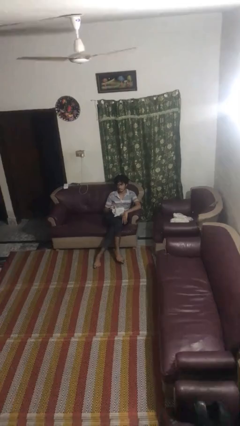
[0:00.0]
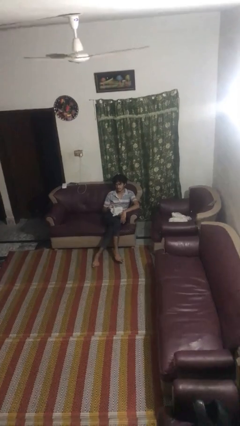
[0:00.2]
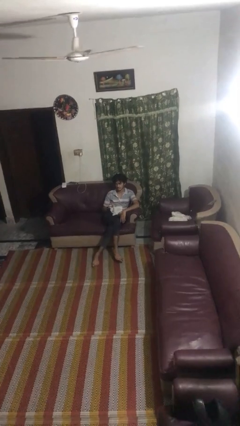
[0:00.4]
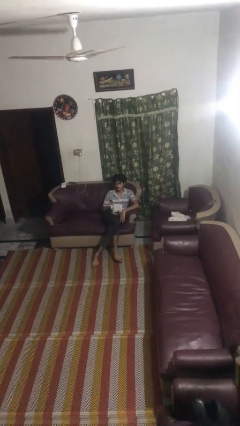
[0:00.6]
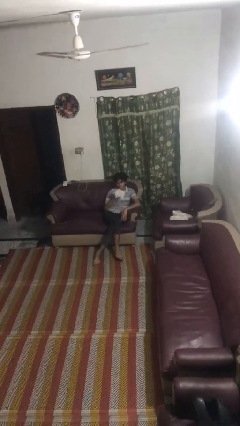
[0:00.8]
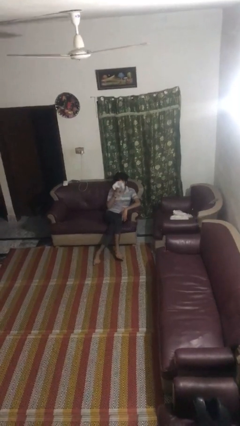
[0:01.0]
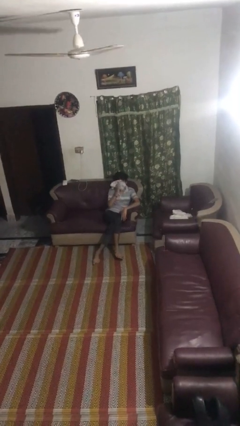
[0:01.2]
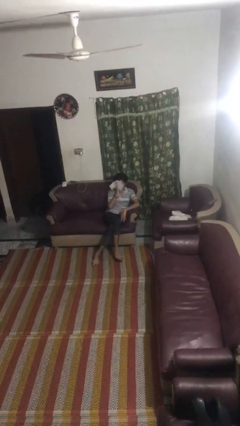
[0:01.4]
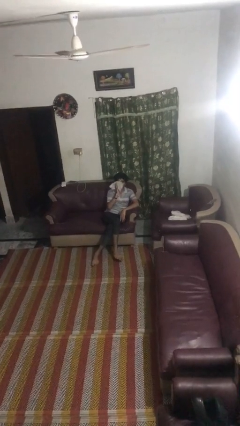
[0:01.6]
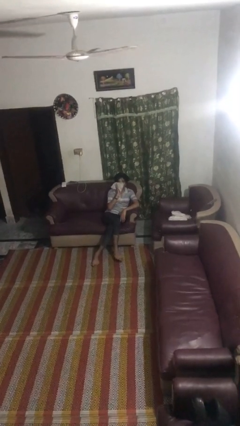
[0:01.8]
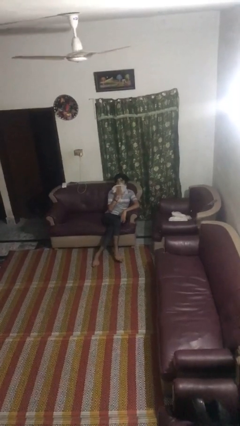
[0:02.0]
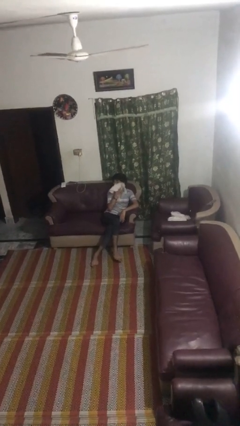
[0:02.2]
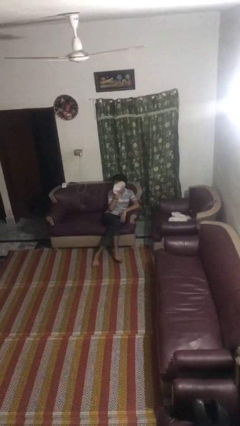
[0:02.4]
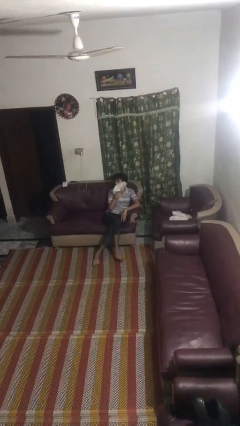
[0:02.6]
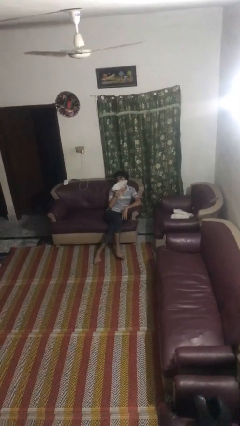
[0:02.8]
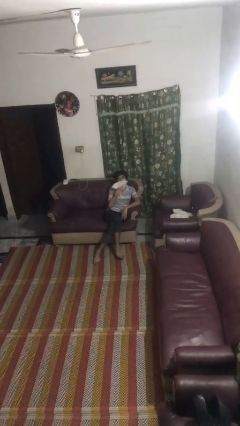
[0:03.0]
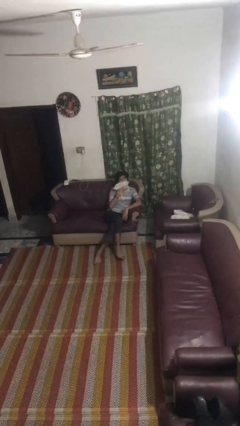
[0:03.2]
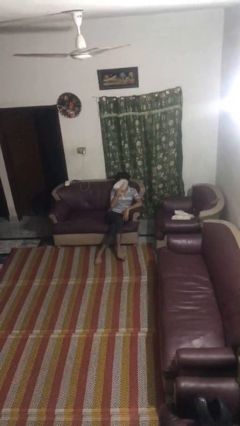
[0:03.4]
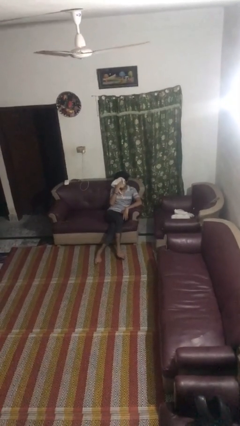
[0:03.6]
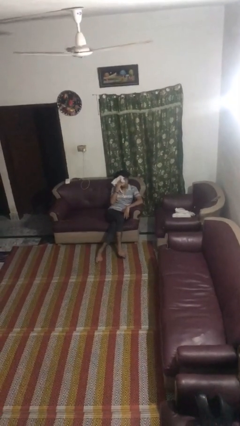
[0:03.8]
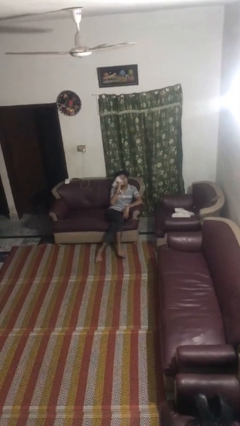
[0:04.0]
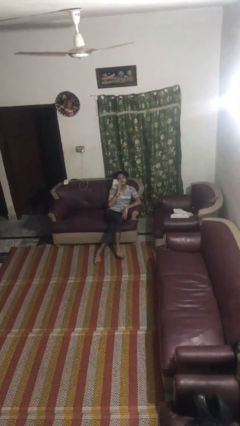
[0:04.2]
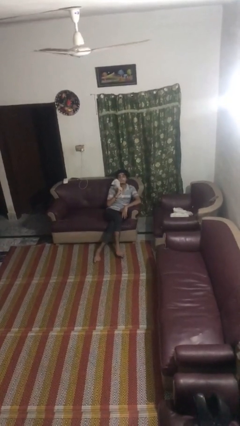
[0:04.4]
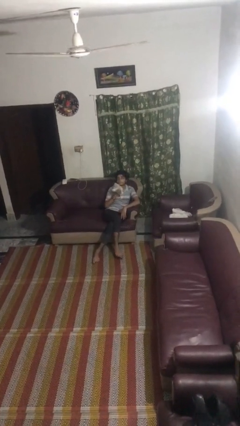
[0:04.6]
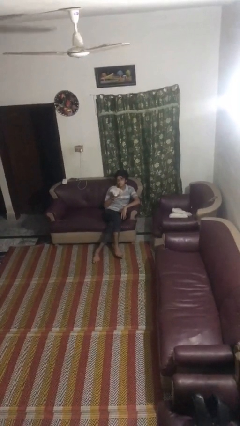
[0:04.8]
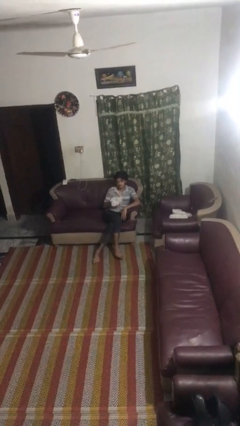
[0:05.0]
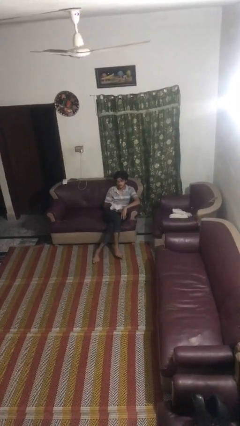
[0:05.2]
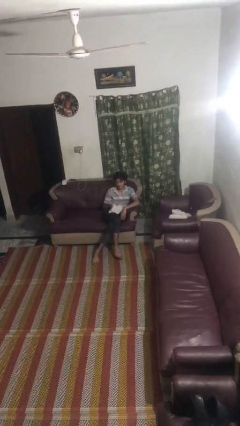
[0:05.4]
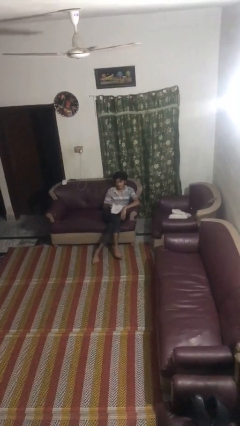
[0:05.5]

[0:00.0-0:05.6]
person wipes mouth with napkin

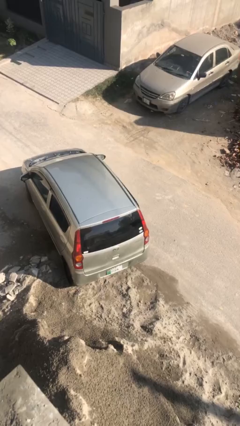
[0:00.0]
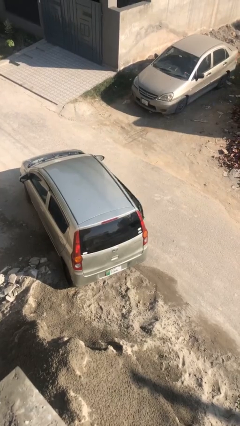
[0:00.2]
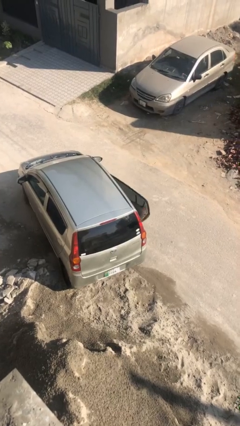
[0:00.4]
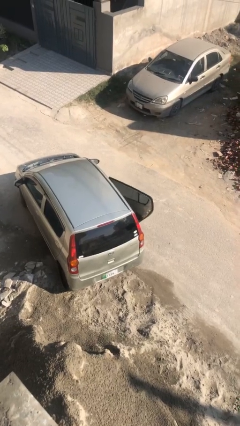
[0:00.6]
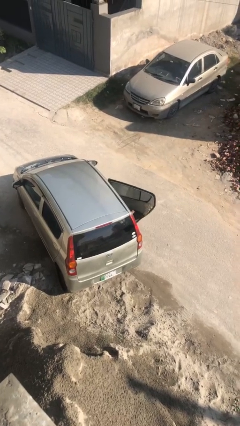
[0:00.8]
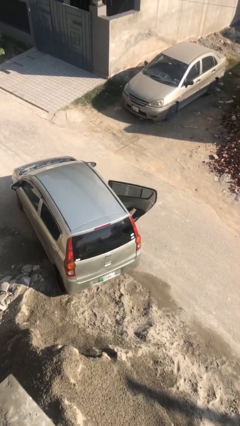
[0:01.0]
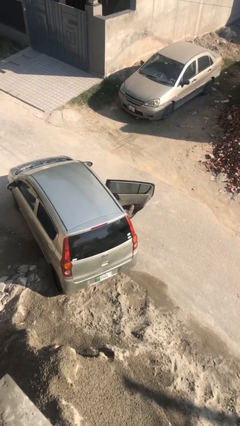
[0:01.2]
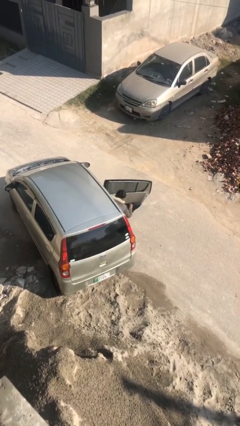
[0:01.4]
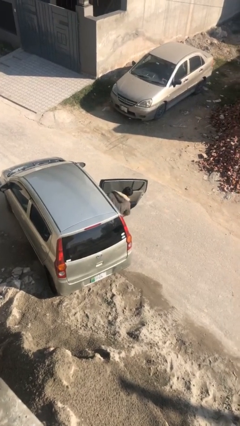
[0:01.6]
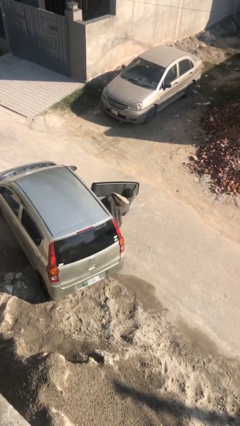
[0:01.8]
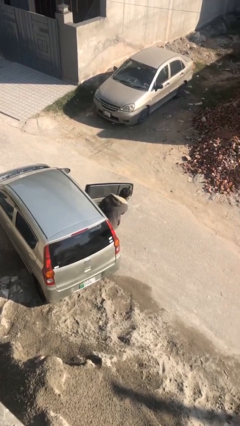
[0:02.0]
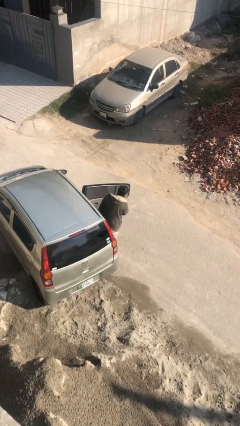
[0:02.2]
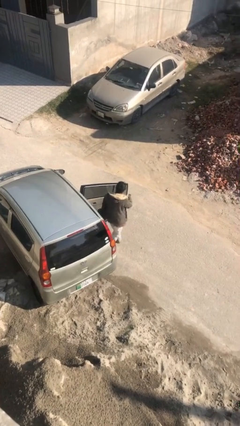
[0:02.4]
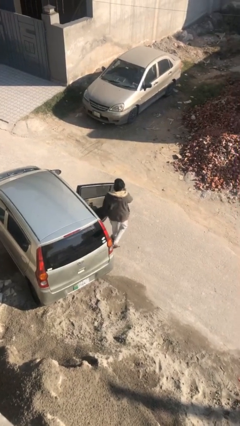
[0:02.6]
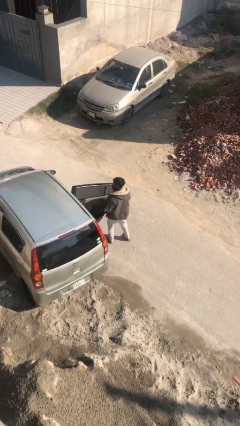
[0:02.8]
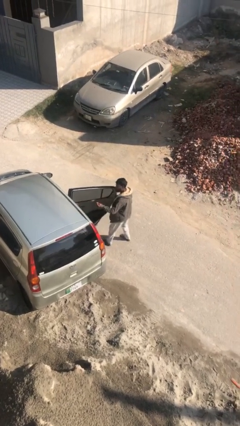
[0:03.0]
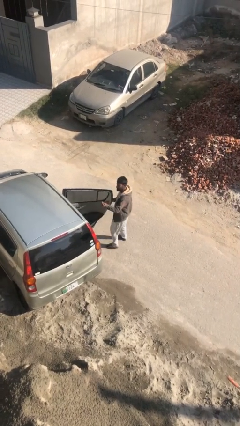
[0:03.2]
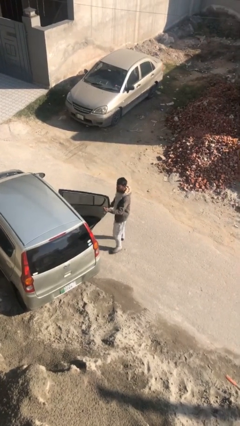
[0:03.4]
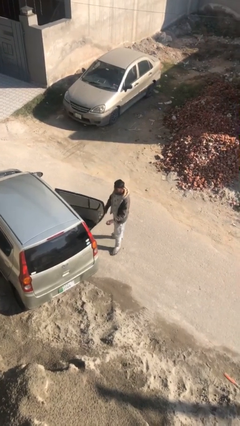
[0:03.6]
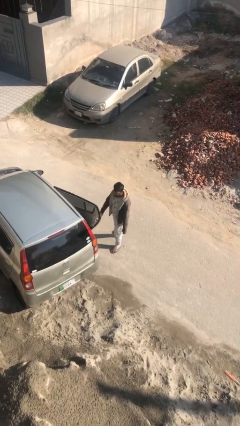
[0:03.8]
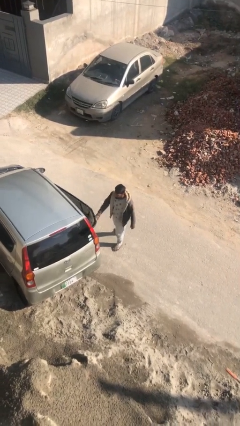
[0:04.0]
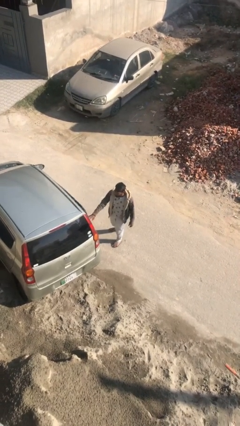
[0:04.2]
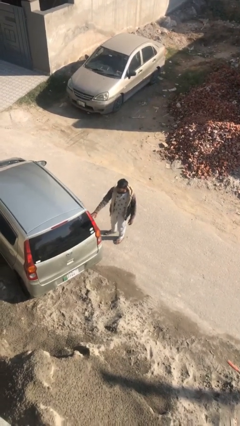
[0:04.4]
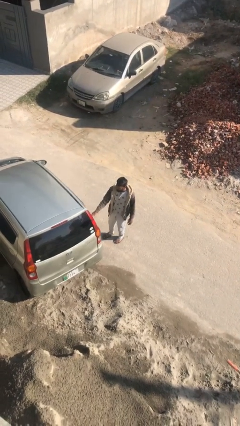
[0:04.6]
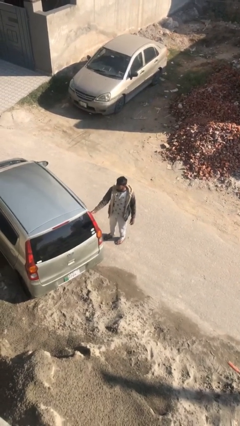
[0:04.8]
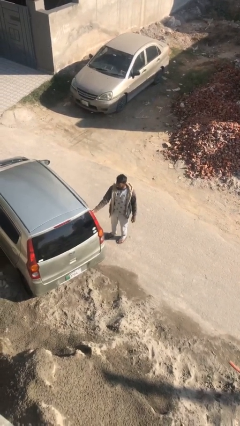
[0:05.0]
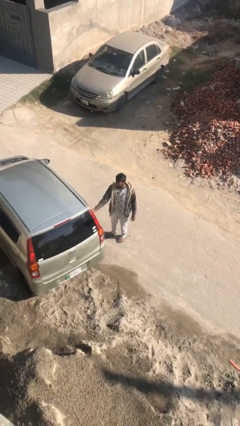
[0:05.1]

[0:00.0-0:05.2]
car drops off person

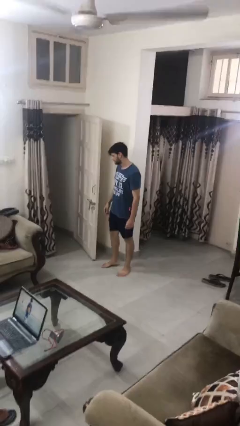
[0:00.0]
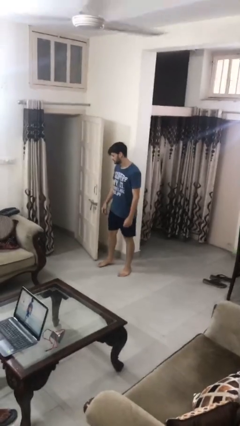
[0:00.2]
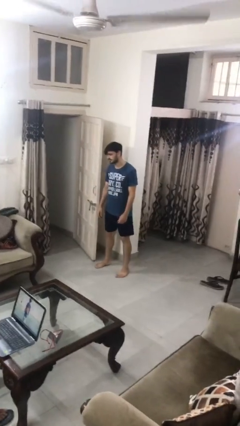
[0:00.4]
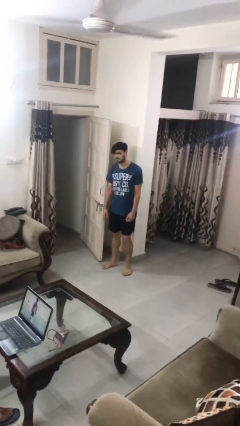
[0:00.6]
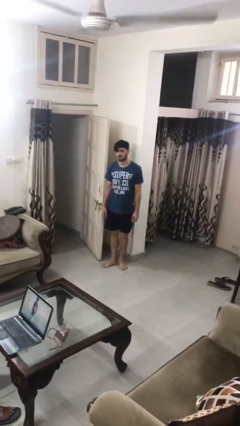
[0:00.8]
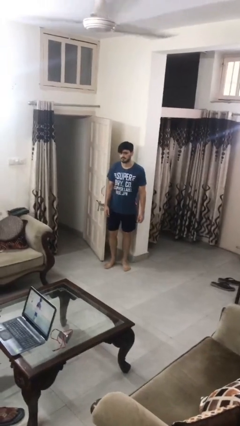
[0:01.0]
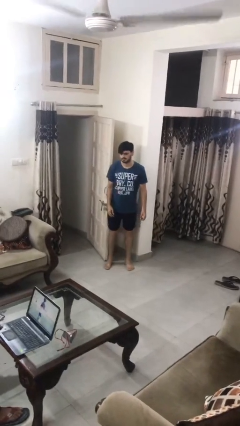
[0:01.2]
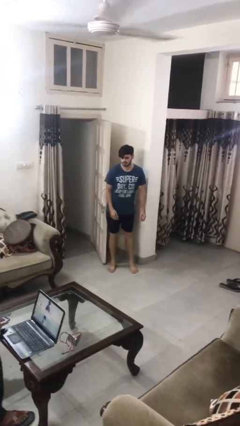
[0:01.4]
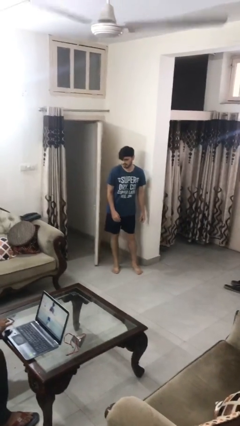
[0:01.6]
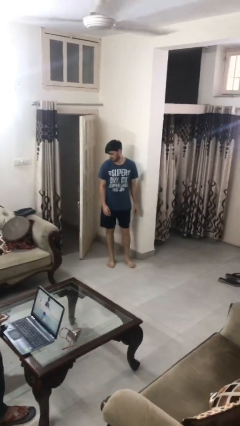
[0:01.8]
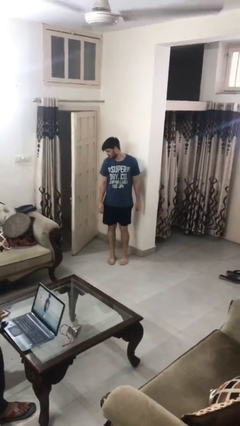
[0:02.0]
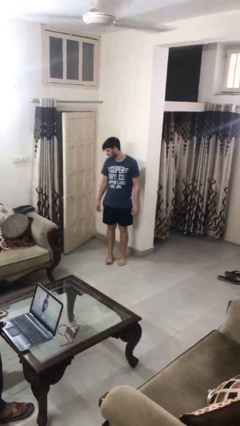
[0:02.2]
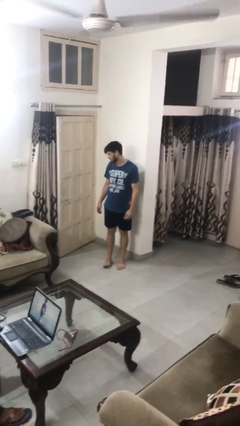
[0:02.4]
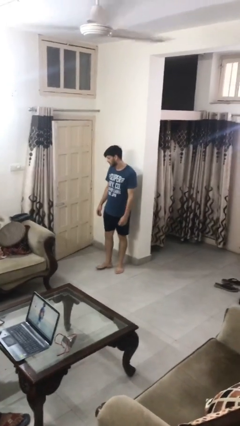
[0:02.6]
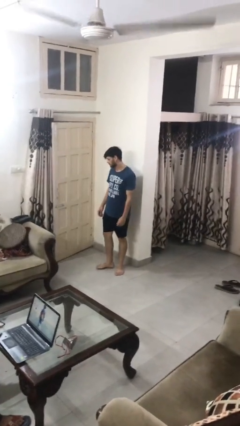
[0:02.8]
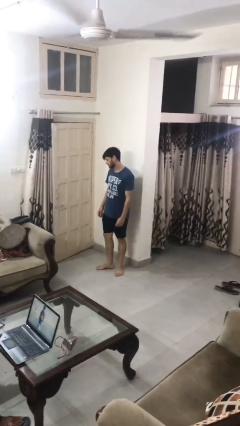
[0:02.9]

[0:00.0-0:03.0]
person closes door with hip

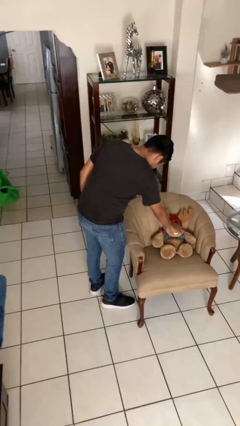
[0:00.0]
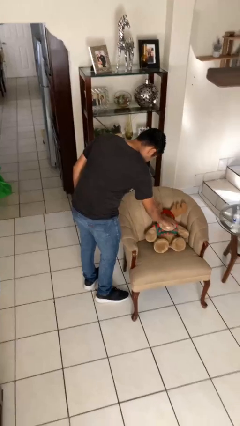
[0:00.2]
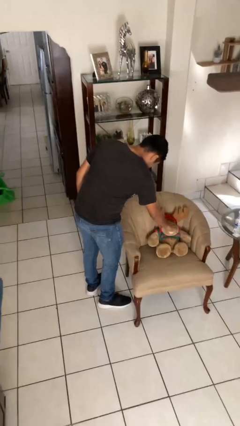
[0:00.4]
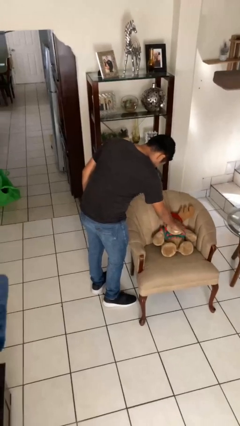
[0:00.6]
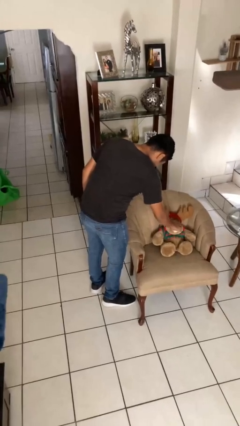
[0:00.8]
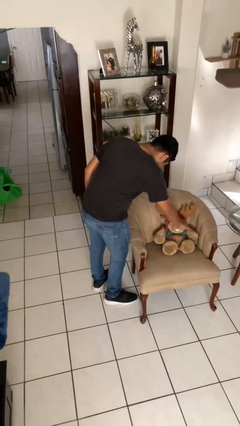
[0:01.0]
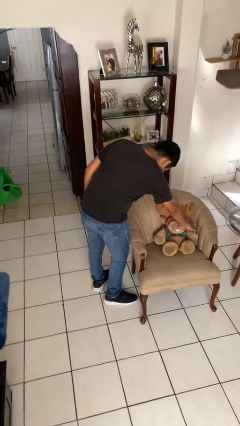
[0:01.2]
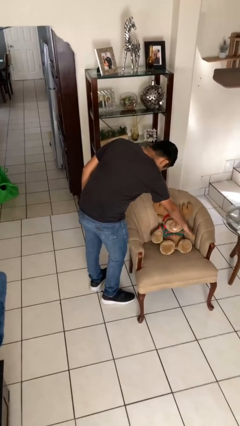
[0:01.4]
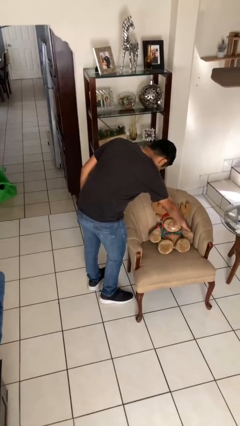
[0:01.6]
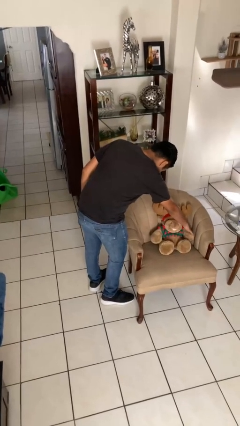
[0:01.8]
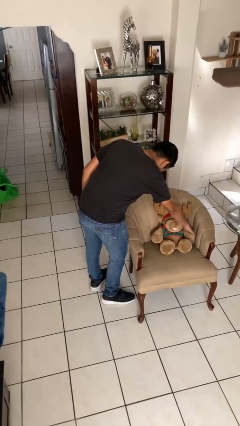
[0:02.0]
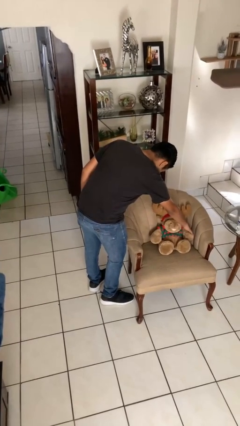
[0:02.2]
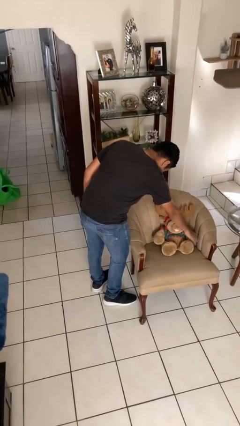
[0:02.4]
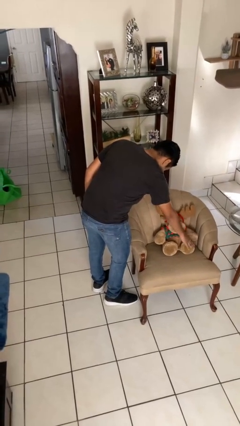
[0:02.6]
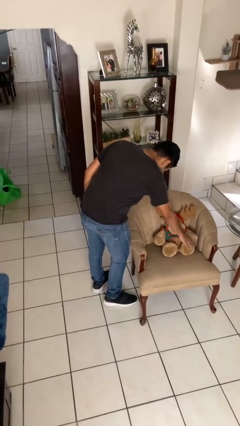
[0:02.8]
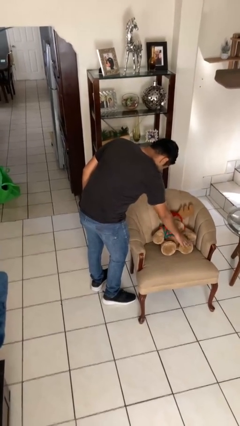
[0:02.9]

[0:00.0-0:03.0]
person waves hand over object

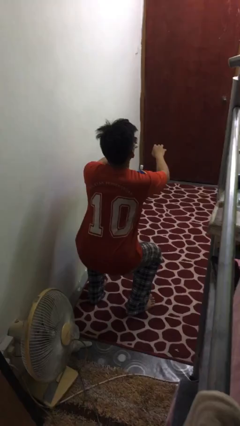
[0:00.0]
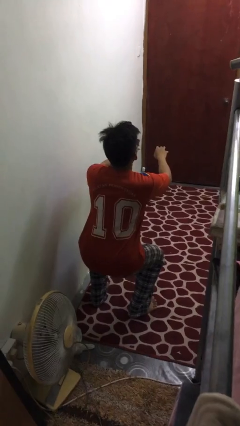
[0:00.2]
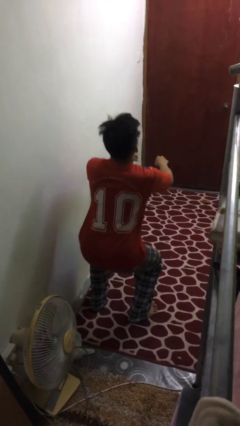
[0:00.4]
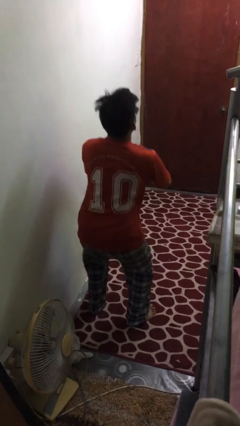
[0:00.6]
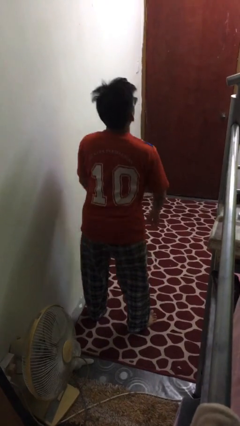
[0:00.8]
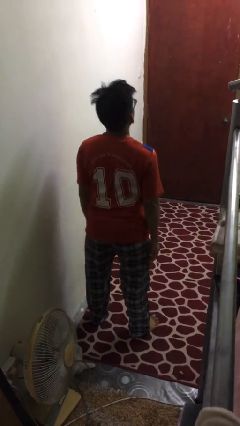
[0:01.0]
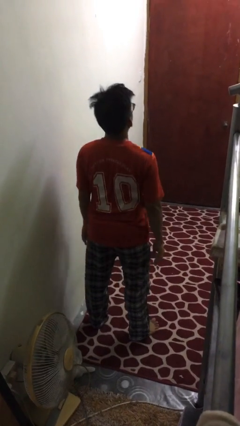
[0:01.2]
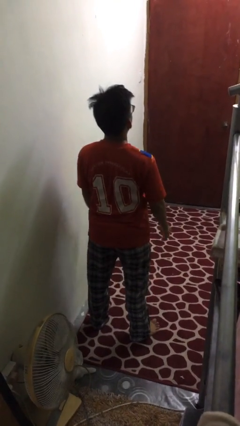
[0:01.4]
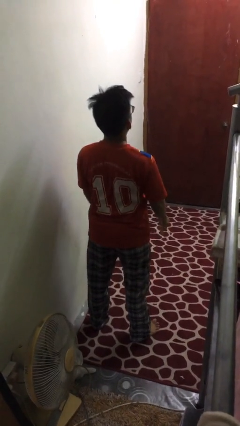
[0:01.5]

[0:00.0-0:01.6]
person stands up
